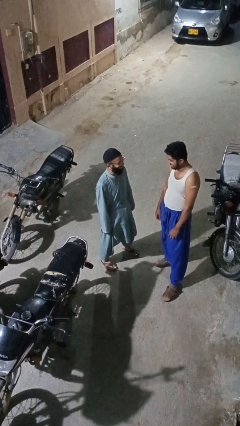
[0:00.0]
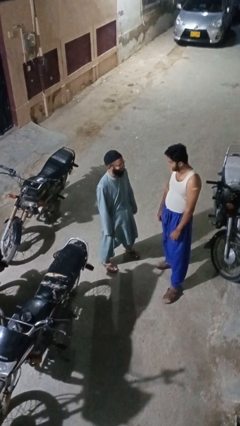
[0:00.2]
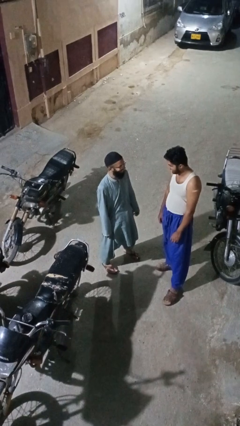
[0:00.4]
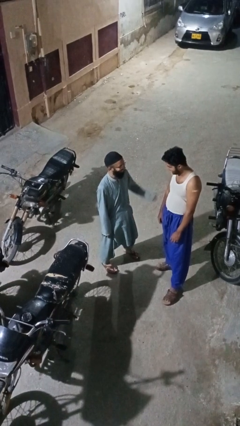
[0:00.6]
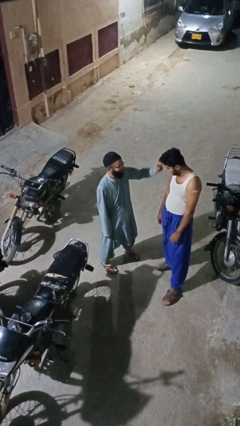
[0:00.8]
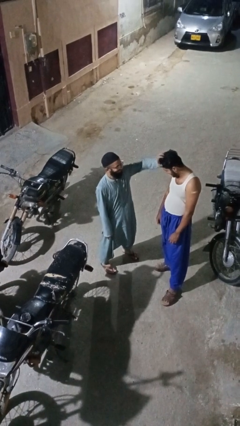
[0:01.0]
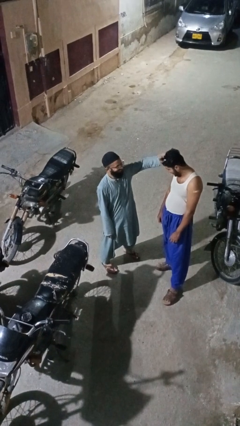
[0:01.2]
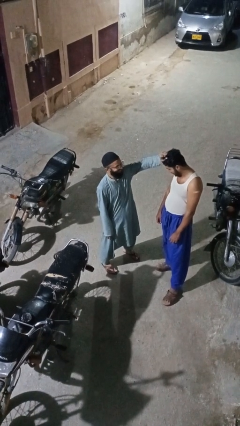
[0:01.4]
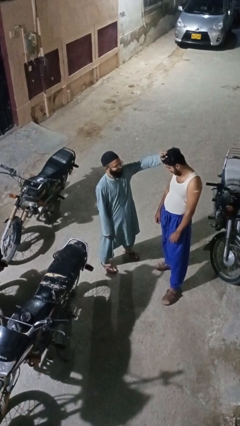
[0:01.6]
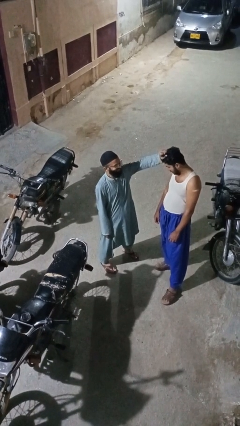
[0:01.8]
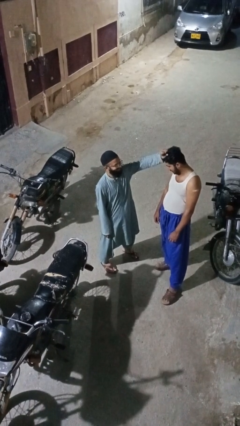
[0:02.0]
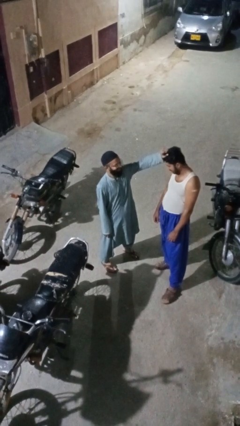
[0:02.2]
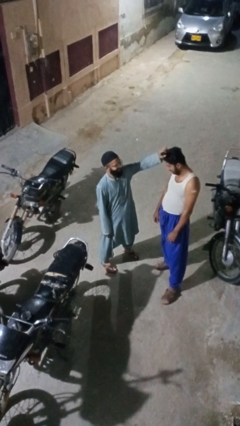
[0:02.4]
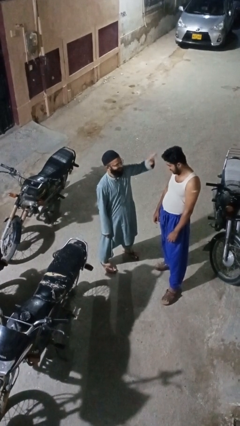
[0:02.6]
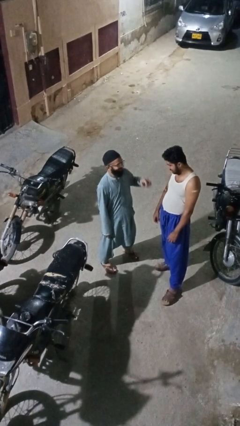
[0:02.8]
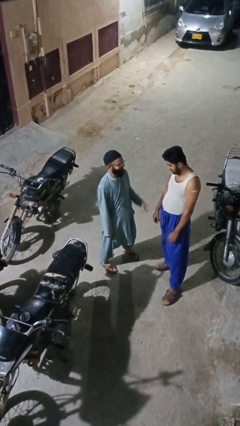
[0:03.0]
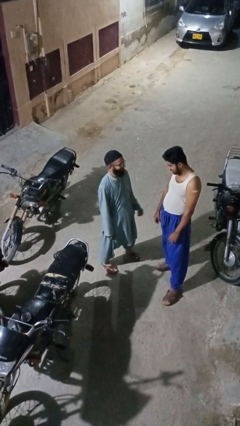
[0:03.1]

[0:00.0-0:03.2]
person grabs person by hair

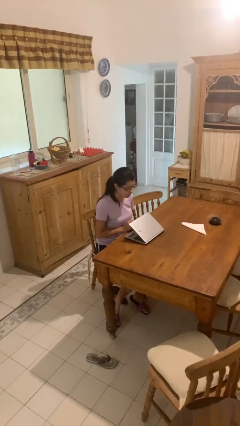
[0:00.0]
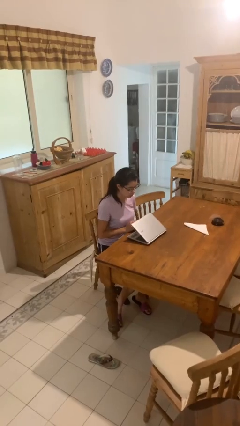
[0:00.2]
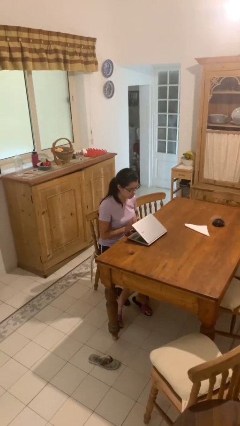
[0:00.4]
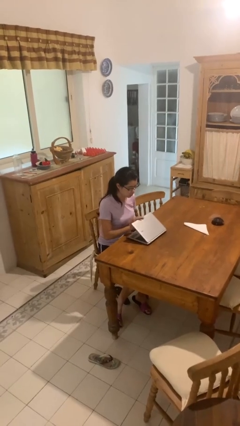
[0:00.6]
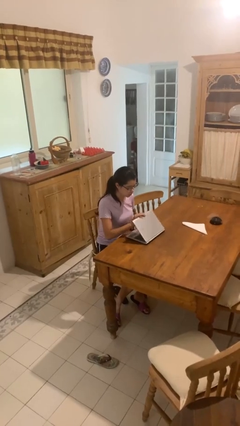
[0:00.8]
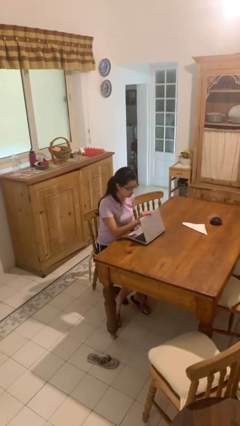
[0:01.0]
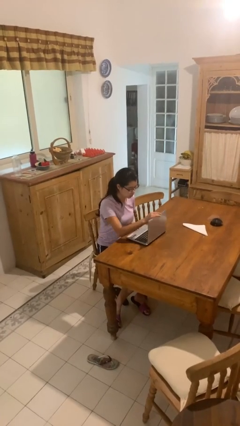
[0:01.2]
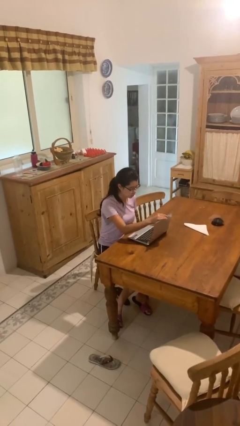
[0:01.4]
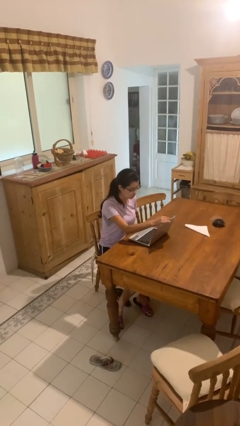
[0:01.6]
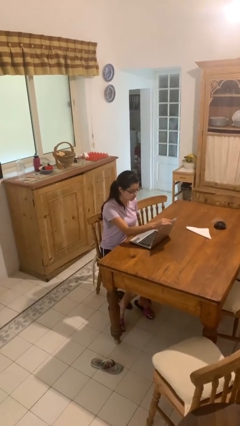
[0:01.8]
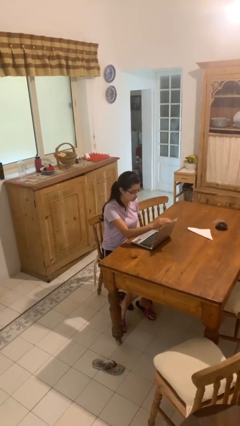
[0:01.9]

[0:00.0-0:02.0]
person opens laptop

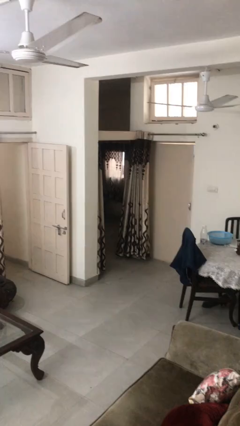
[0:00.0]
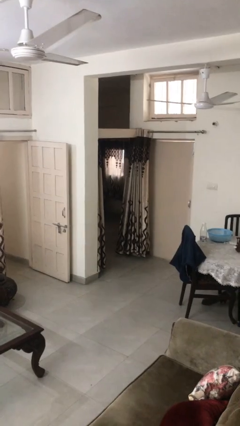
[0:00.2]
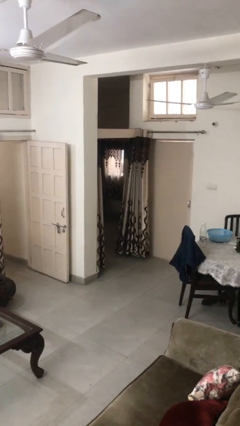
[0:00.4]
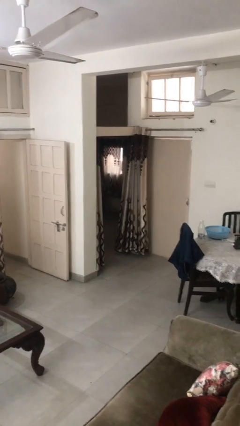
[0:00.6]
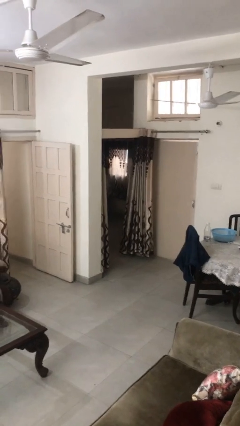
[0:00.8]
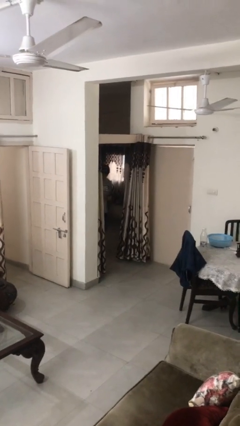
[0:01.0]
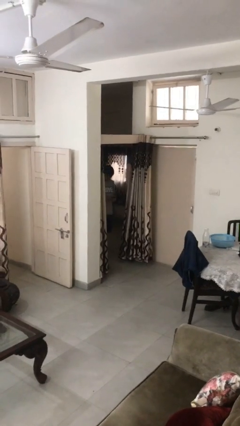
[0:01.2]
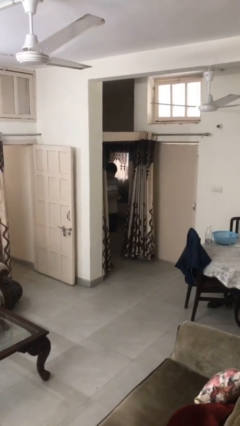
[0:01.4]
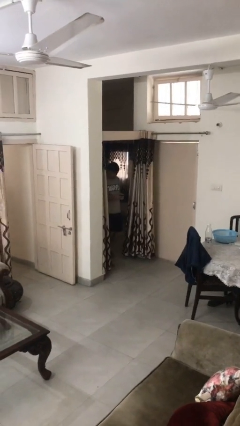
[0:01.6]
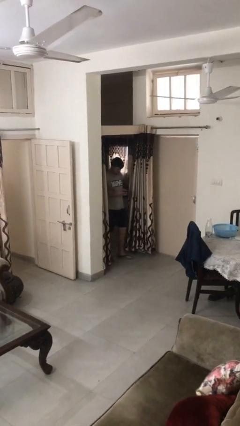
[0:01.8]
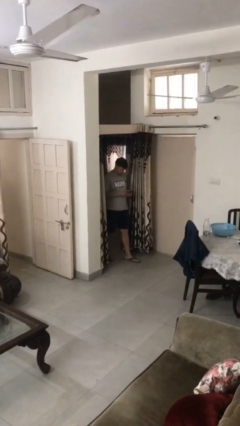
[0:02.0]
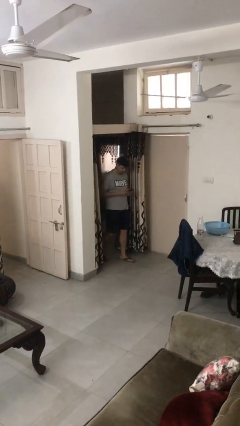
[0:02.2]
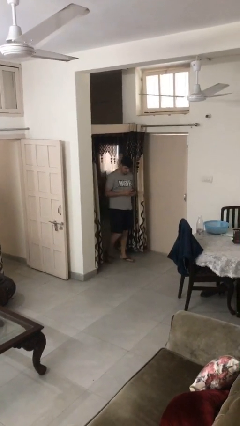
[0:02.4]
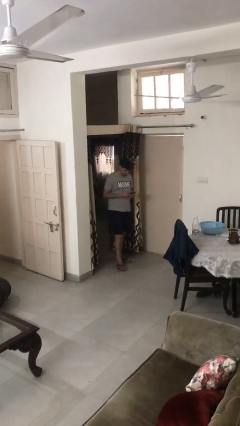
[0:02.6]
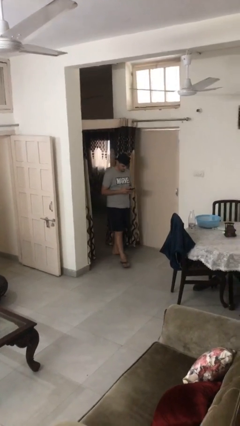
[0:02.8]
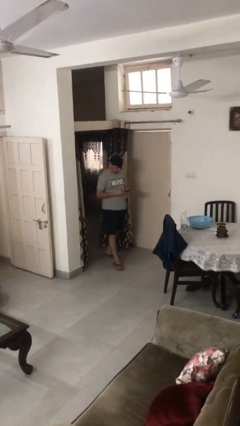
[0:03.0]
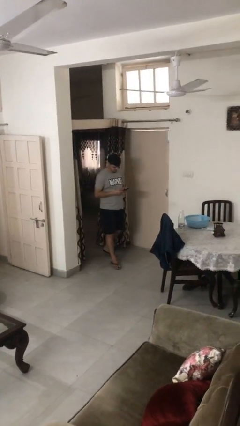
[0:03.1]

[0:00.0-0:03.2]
person enters scene through structure

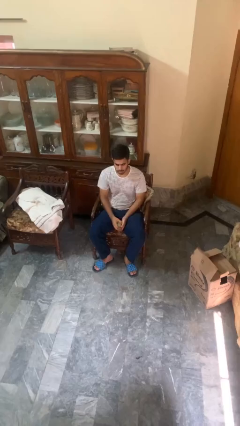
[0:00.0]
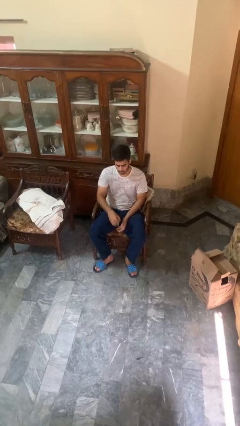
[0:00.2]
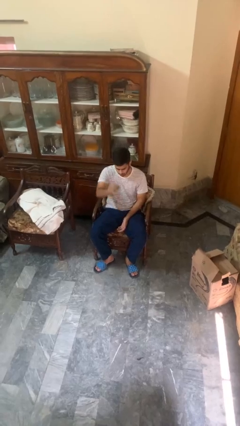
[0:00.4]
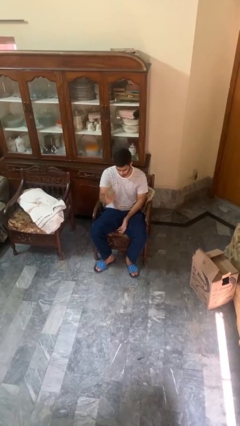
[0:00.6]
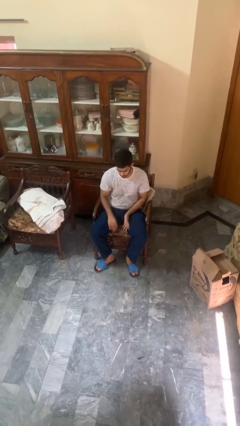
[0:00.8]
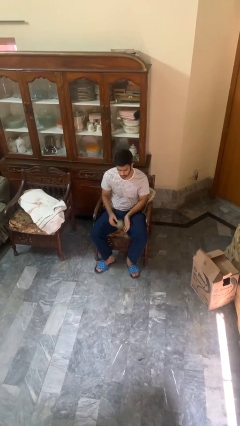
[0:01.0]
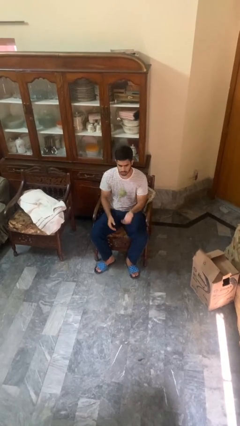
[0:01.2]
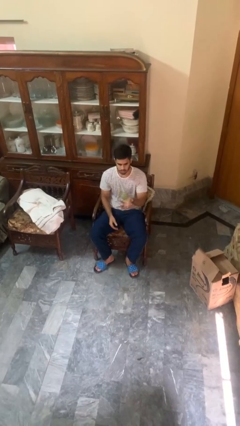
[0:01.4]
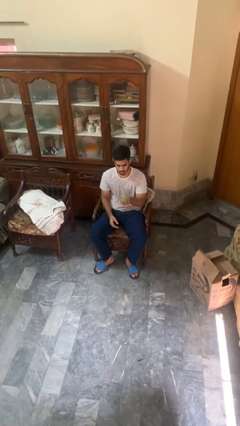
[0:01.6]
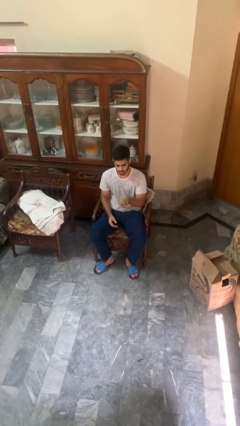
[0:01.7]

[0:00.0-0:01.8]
person bounces ball on floor

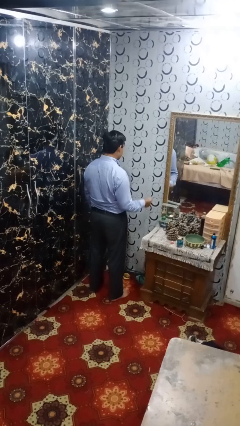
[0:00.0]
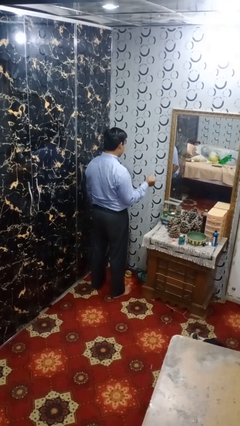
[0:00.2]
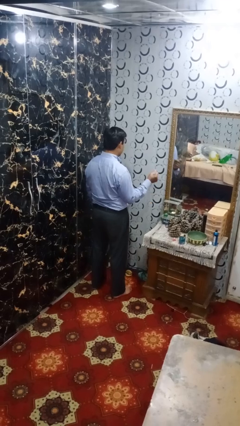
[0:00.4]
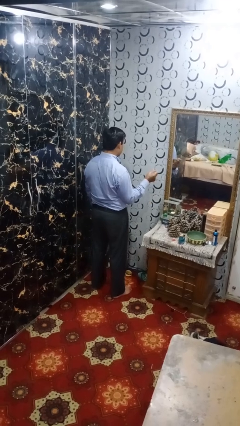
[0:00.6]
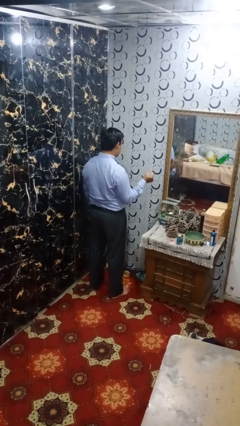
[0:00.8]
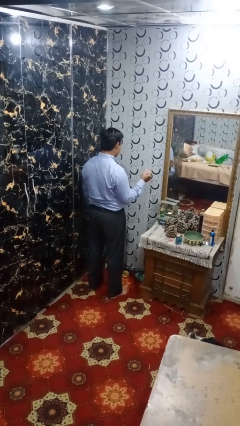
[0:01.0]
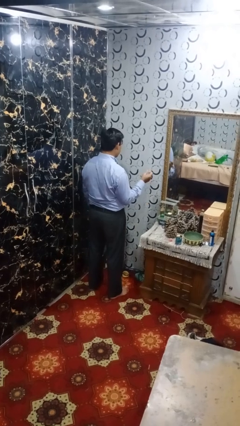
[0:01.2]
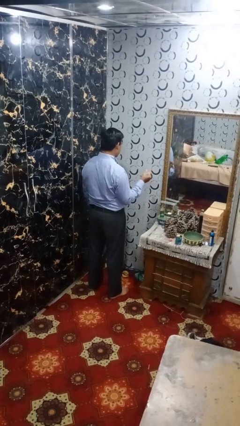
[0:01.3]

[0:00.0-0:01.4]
person snaps fingers

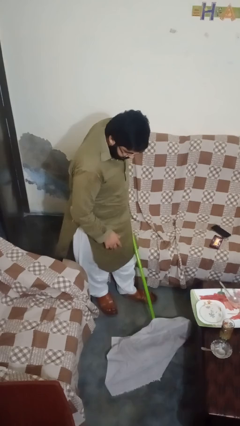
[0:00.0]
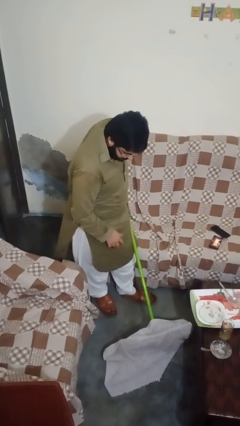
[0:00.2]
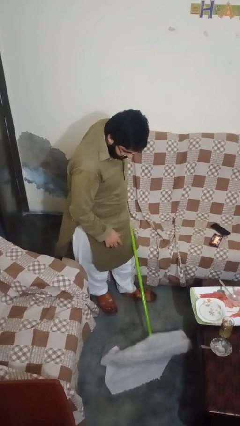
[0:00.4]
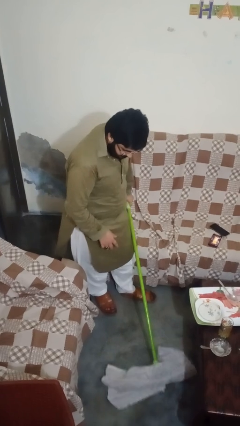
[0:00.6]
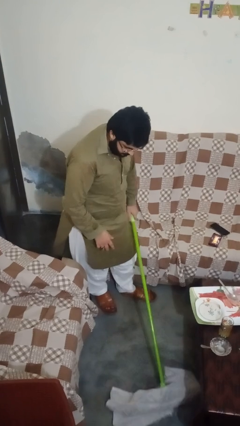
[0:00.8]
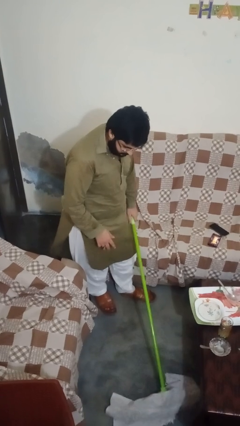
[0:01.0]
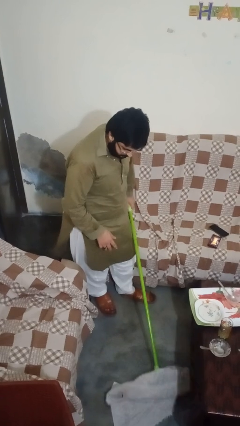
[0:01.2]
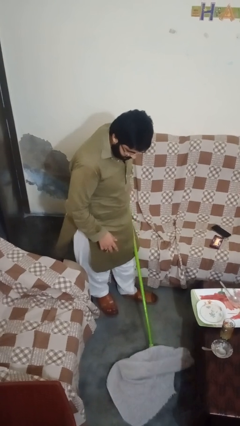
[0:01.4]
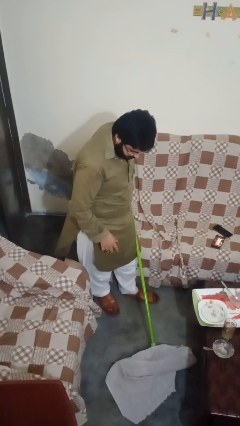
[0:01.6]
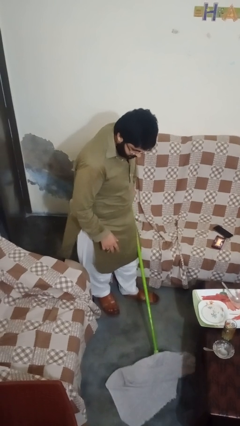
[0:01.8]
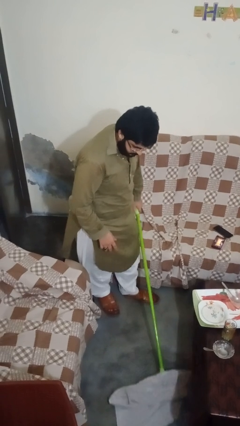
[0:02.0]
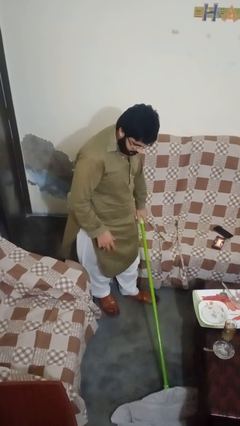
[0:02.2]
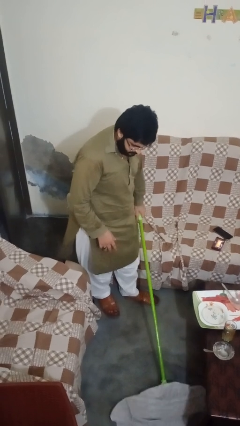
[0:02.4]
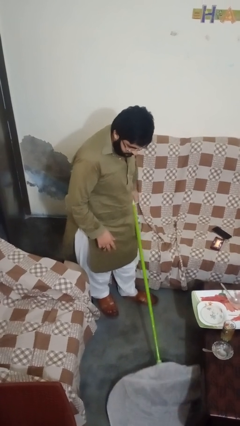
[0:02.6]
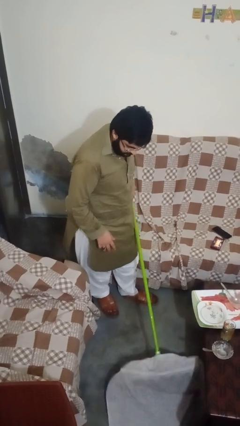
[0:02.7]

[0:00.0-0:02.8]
person mops

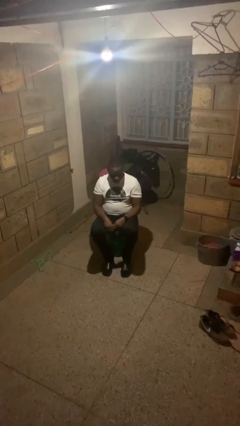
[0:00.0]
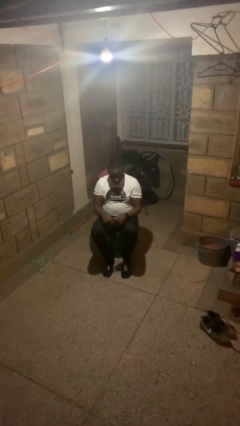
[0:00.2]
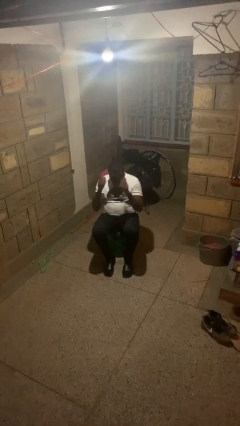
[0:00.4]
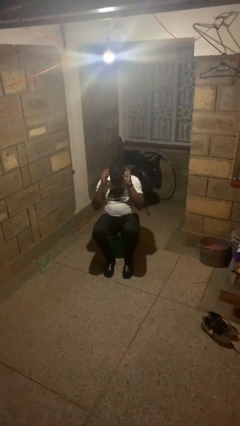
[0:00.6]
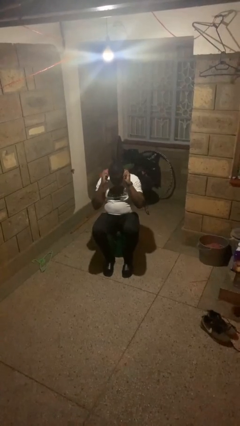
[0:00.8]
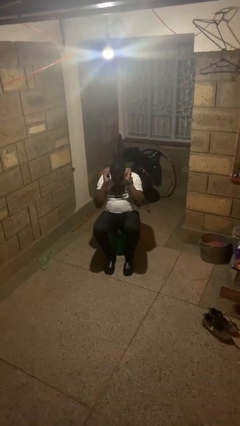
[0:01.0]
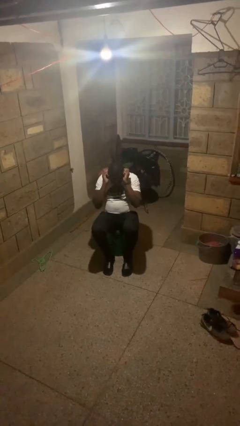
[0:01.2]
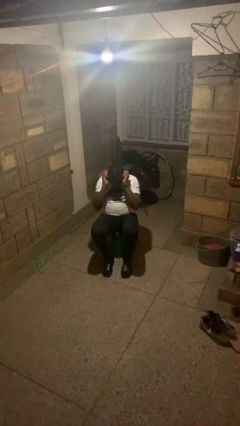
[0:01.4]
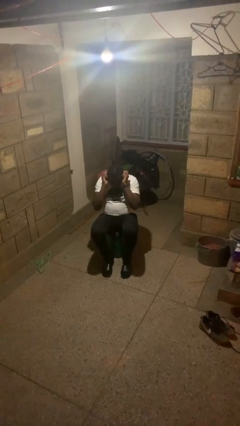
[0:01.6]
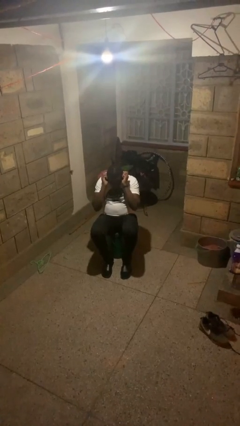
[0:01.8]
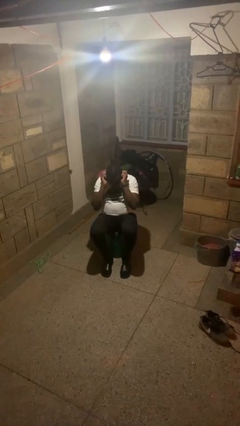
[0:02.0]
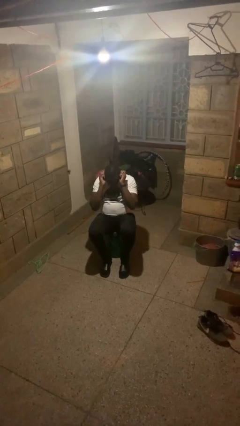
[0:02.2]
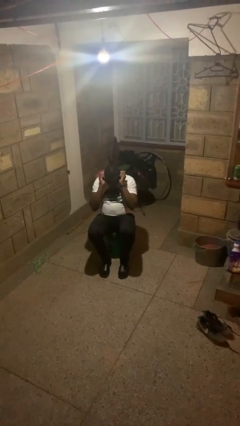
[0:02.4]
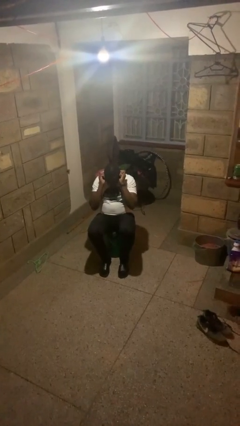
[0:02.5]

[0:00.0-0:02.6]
person touches earlobe
